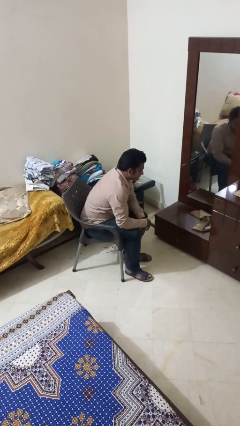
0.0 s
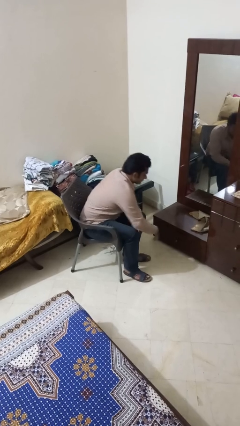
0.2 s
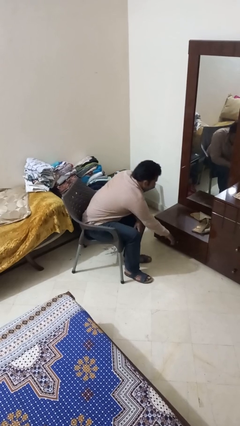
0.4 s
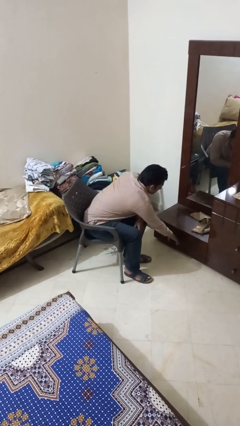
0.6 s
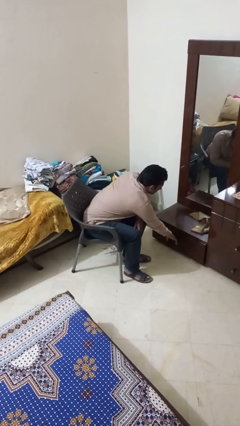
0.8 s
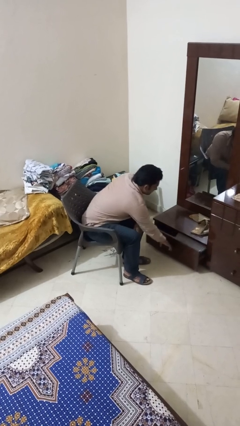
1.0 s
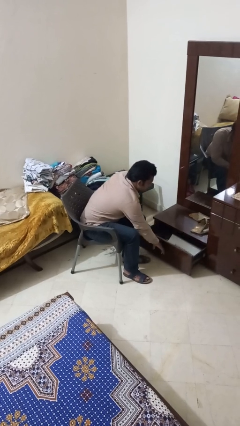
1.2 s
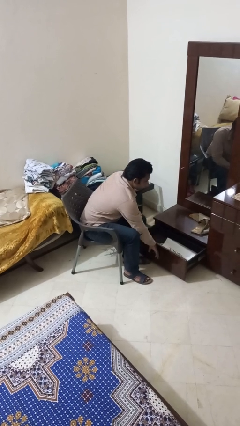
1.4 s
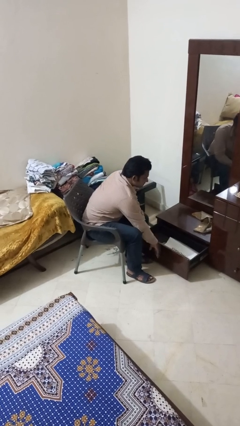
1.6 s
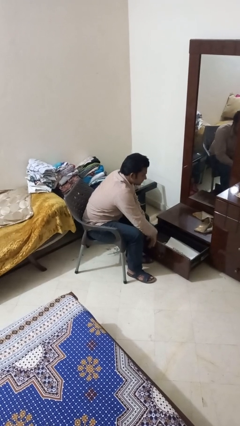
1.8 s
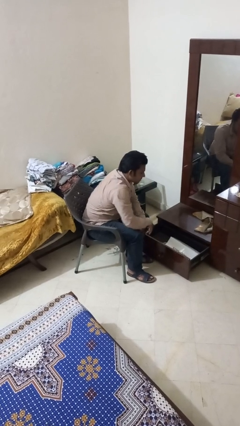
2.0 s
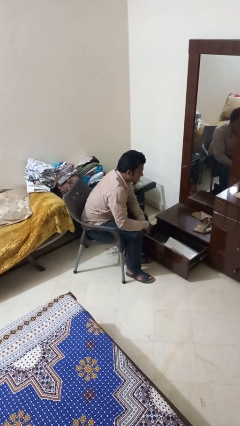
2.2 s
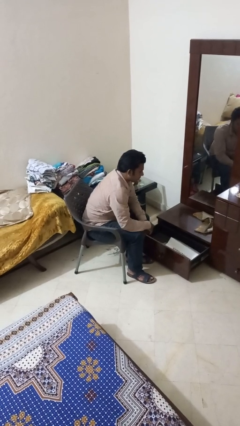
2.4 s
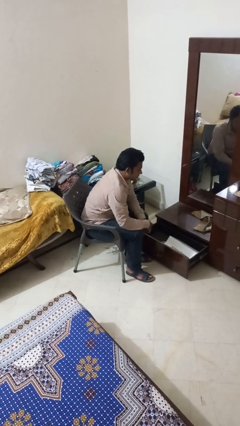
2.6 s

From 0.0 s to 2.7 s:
person opens closet door

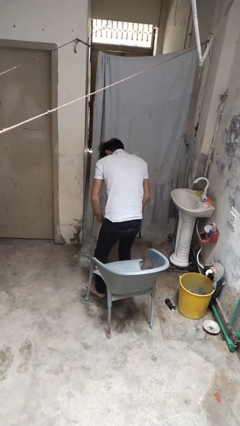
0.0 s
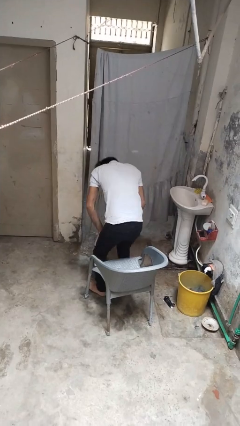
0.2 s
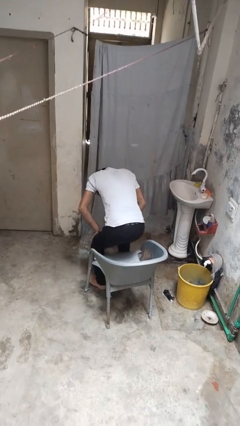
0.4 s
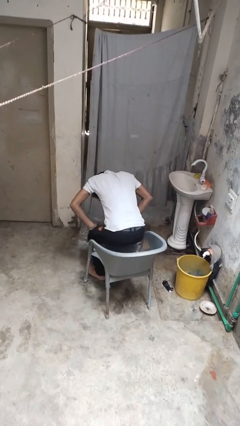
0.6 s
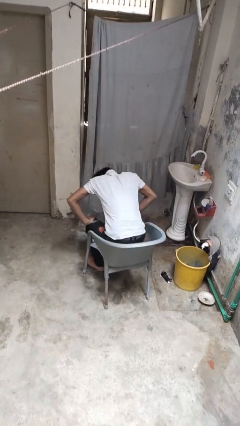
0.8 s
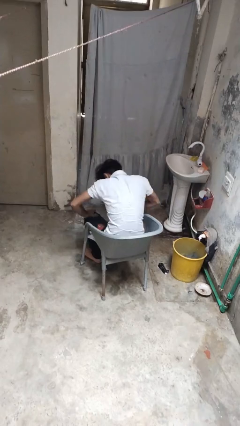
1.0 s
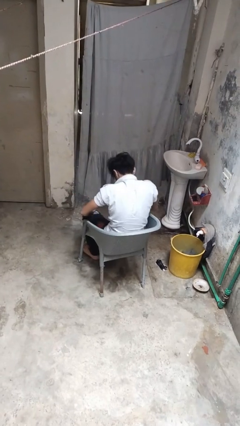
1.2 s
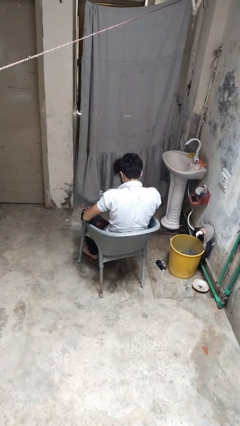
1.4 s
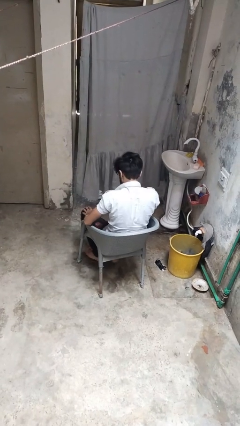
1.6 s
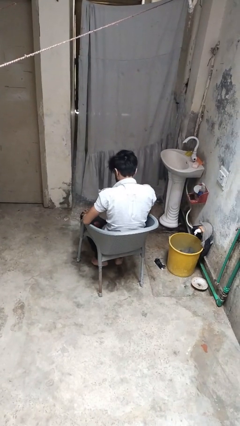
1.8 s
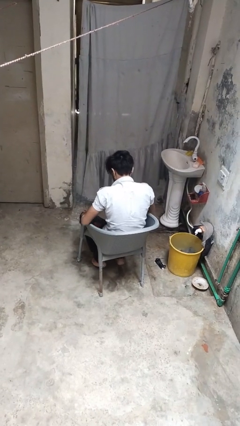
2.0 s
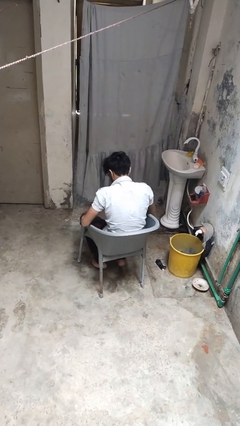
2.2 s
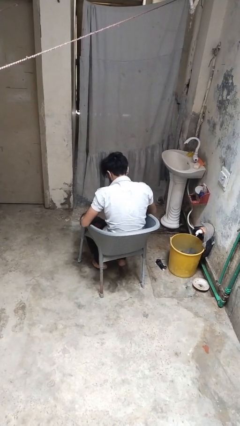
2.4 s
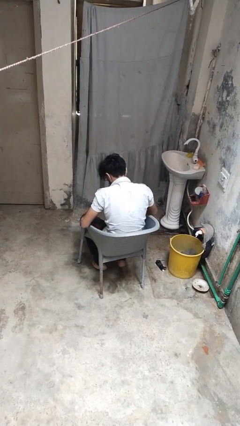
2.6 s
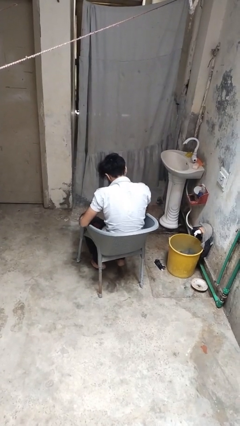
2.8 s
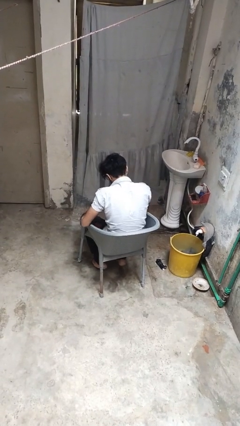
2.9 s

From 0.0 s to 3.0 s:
person sits down

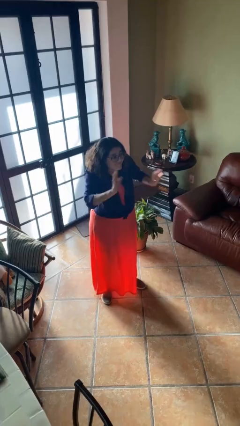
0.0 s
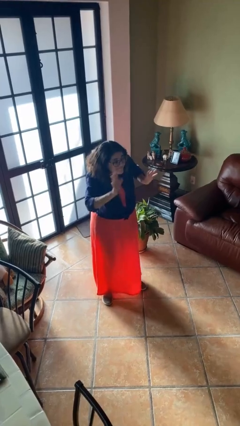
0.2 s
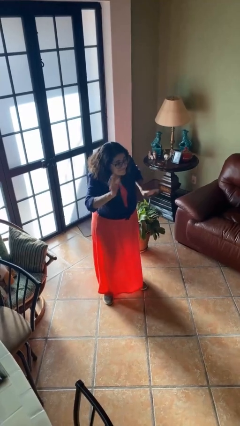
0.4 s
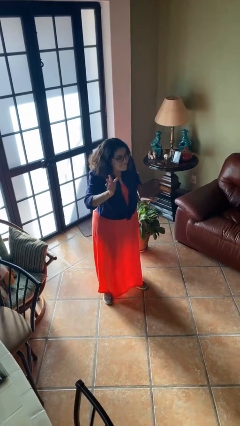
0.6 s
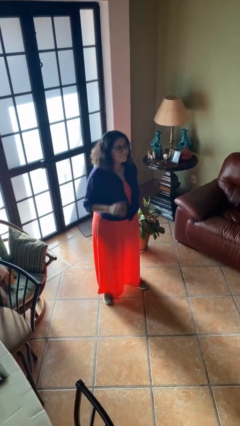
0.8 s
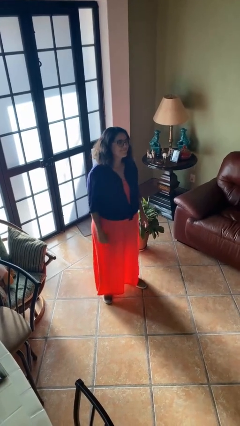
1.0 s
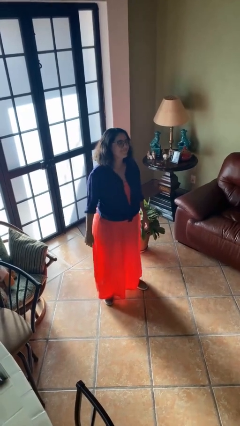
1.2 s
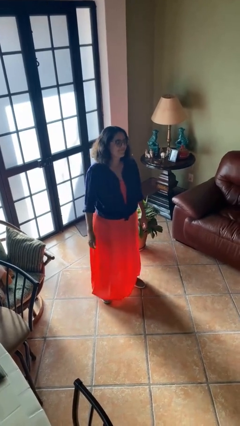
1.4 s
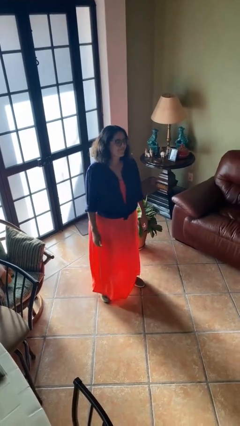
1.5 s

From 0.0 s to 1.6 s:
person waves at person

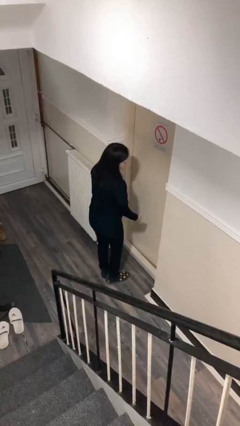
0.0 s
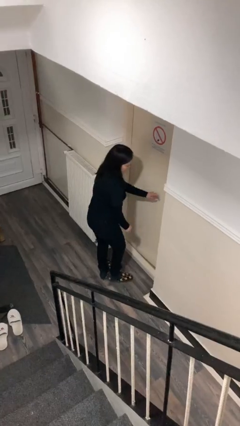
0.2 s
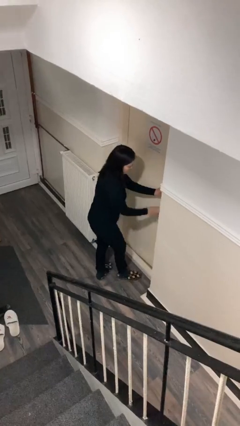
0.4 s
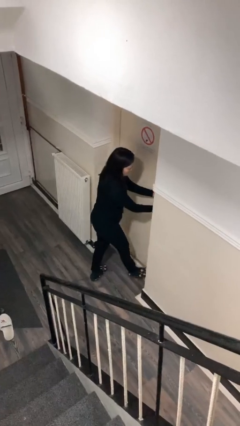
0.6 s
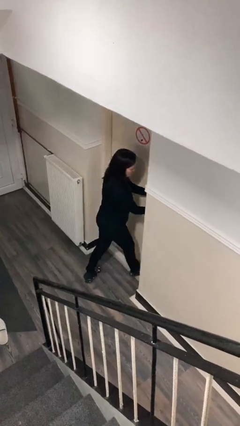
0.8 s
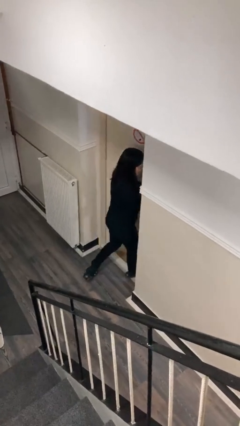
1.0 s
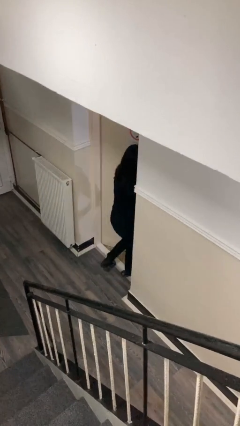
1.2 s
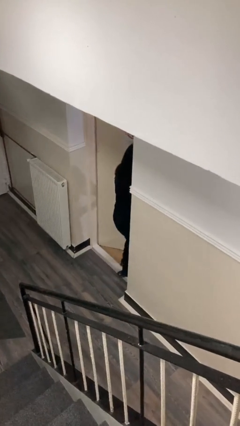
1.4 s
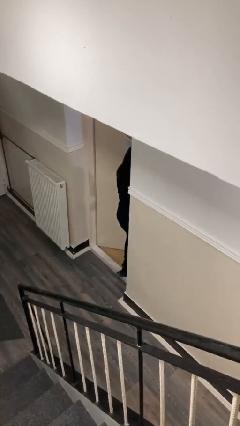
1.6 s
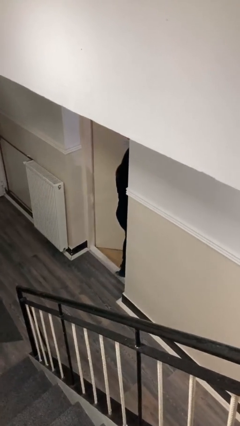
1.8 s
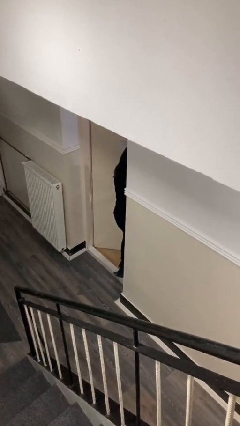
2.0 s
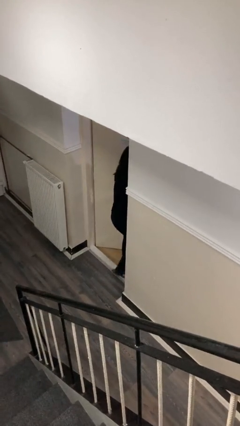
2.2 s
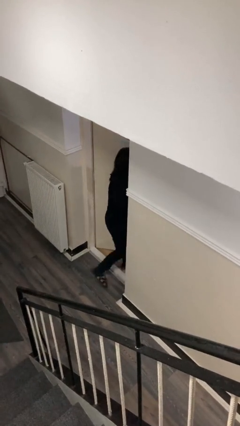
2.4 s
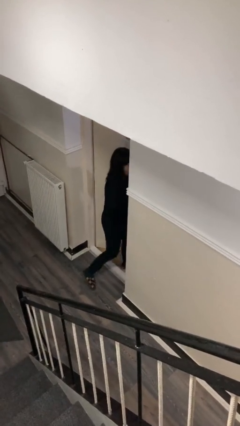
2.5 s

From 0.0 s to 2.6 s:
person opens facility door

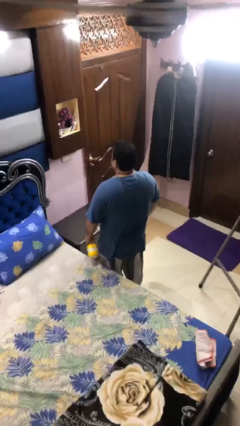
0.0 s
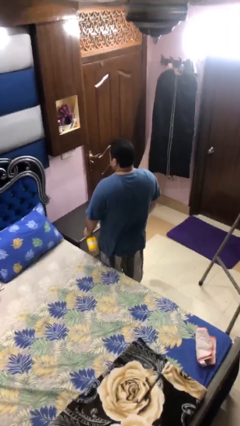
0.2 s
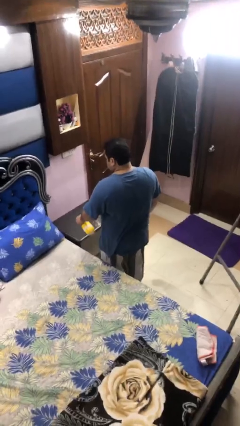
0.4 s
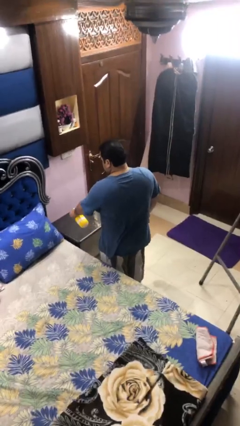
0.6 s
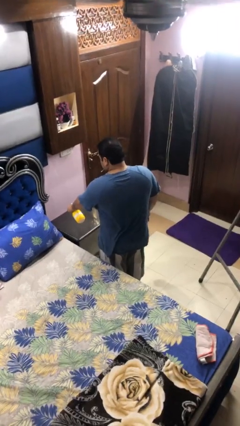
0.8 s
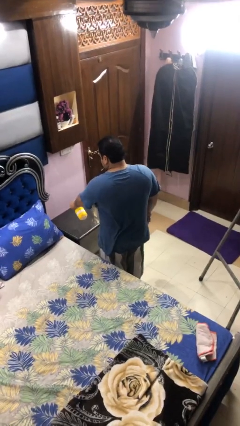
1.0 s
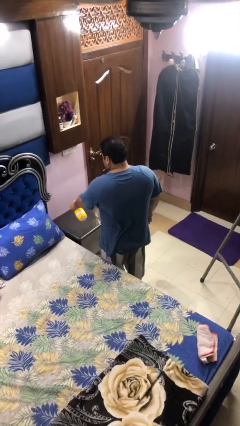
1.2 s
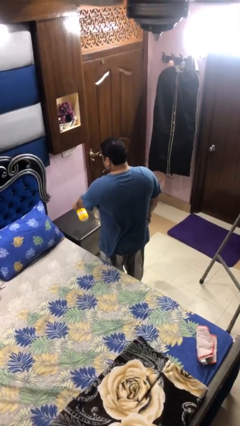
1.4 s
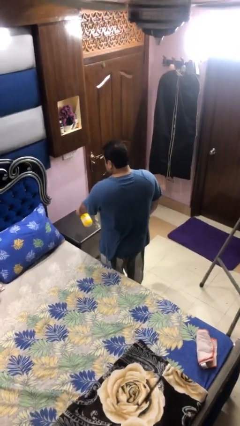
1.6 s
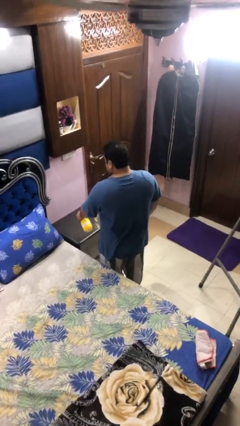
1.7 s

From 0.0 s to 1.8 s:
person sprays from bottle

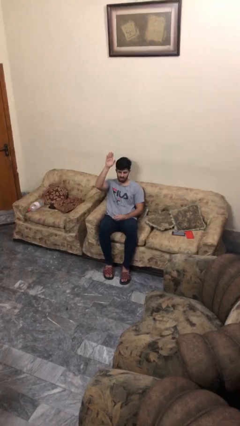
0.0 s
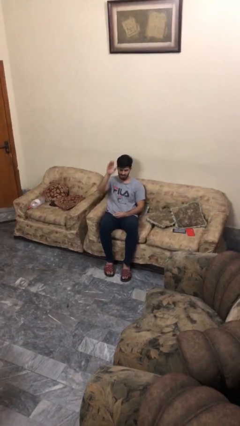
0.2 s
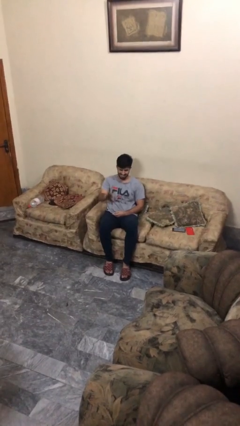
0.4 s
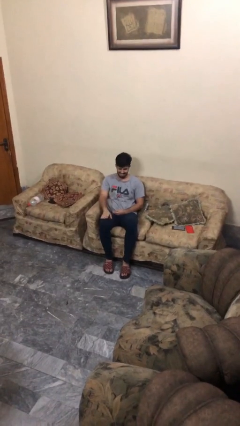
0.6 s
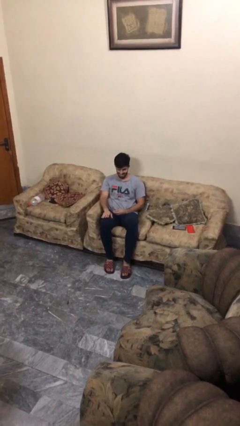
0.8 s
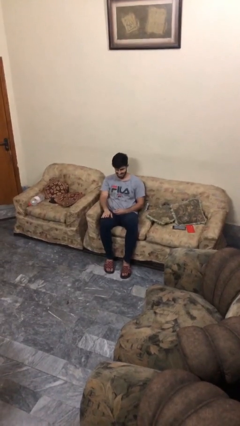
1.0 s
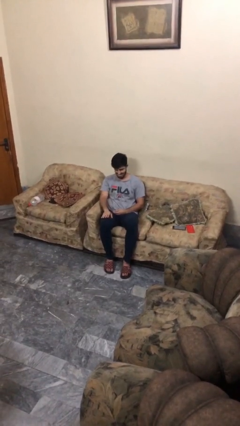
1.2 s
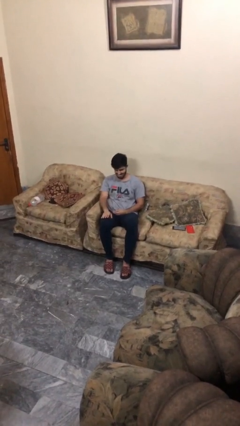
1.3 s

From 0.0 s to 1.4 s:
person gestures lower hand

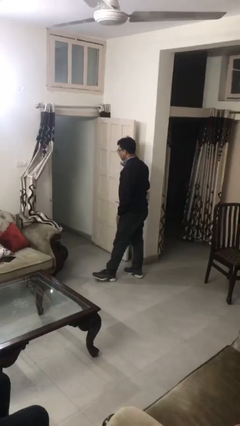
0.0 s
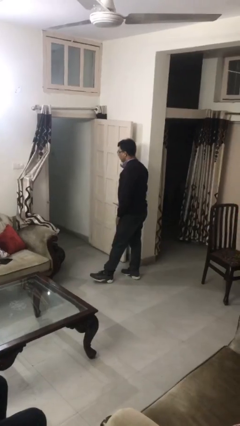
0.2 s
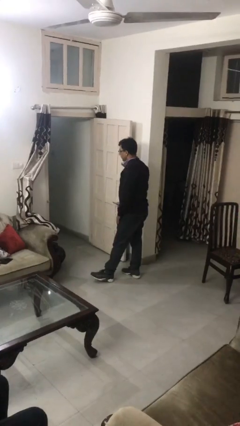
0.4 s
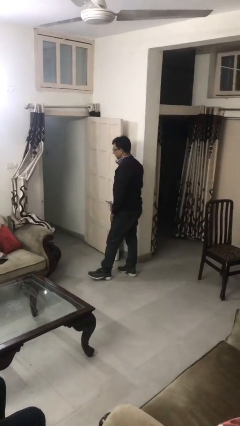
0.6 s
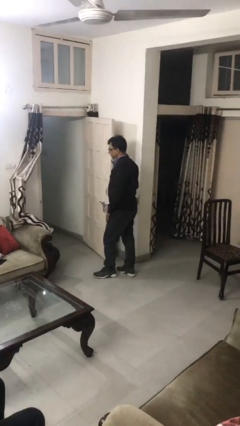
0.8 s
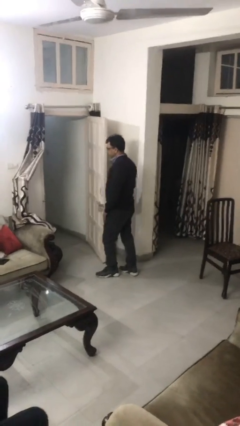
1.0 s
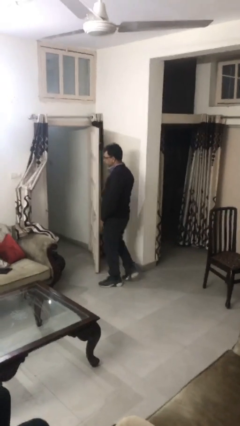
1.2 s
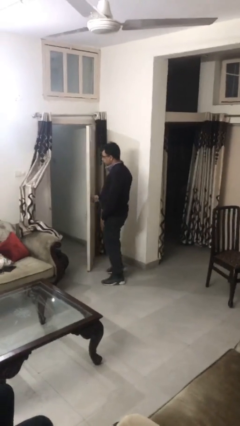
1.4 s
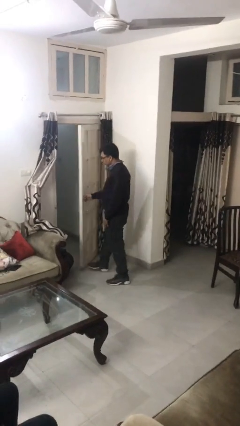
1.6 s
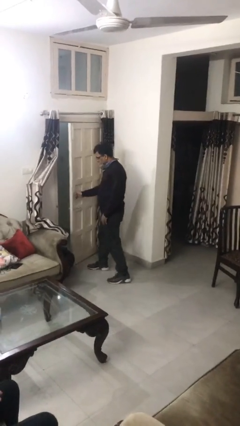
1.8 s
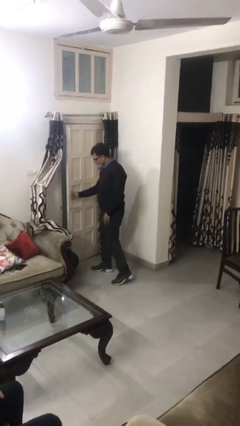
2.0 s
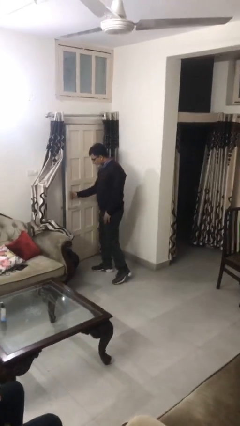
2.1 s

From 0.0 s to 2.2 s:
person closes facility door

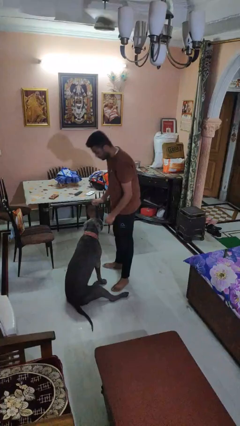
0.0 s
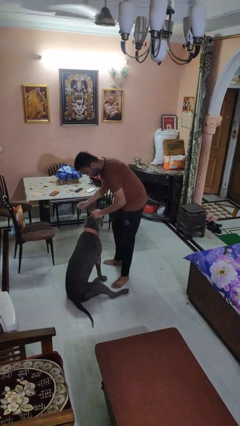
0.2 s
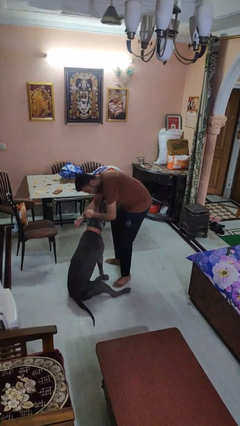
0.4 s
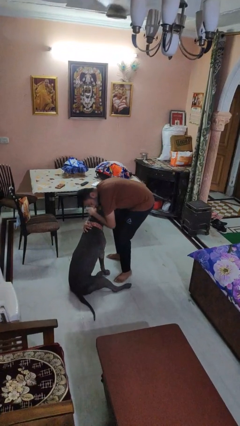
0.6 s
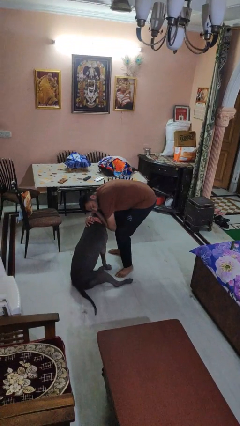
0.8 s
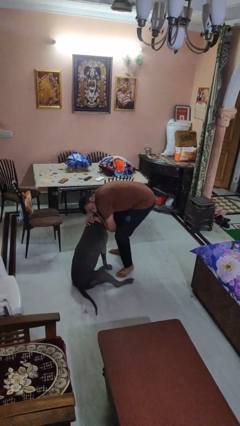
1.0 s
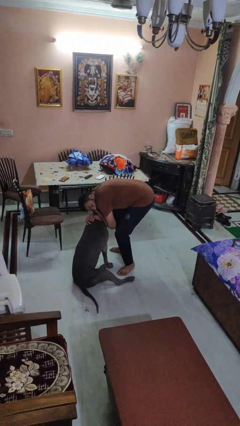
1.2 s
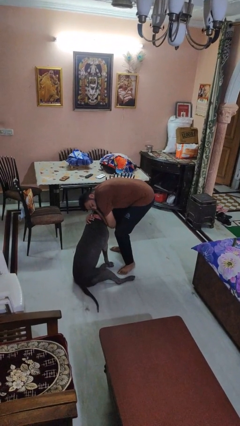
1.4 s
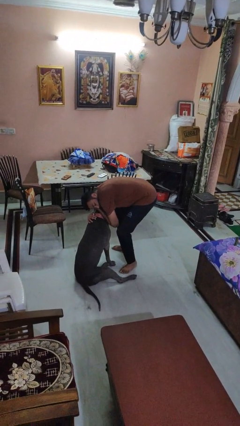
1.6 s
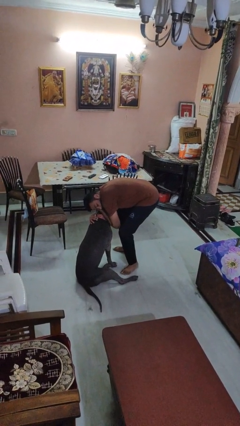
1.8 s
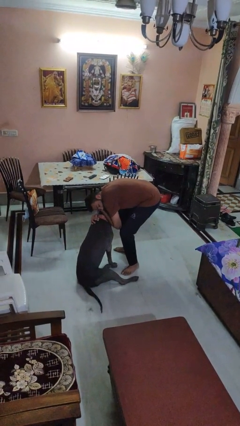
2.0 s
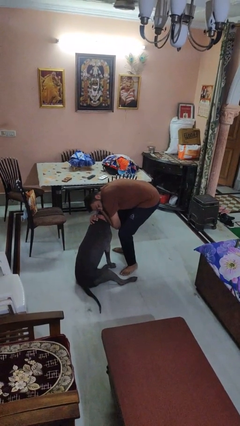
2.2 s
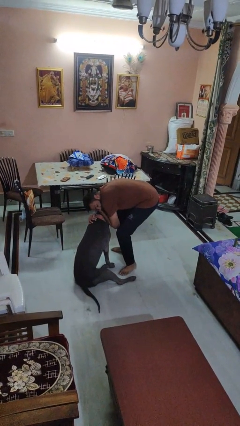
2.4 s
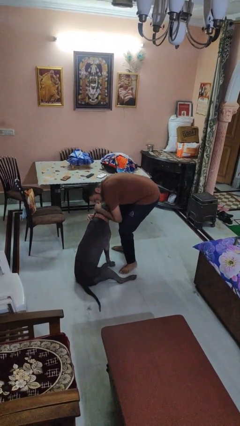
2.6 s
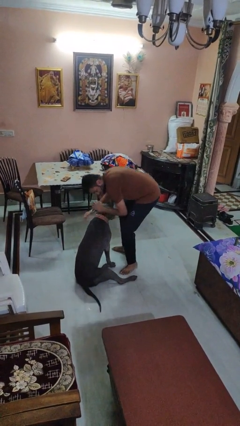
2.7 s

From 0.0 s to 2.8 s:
person hugs dog
